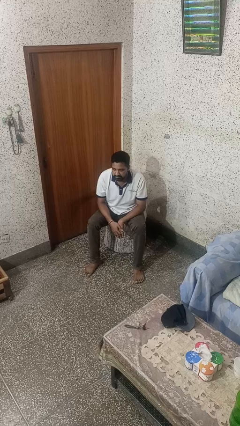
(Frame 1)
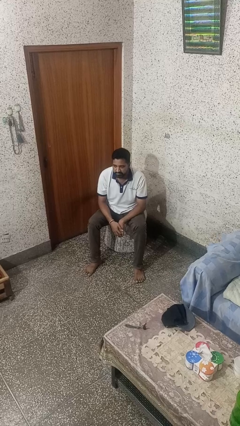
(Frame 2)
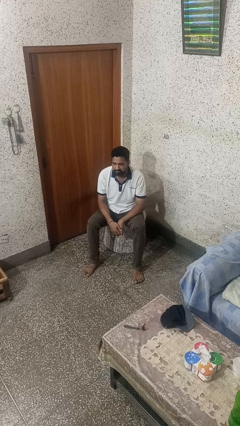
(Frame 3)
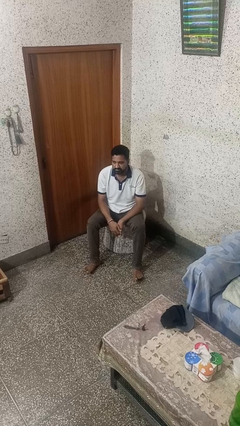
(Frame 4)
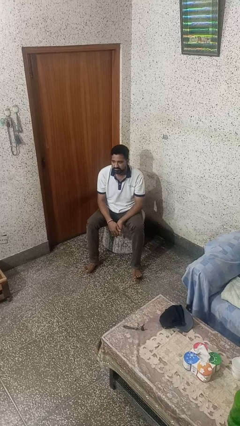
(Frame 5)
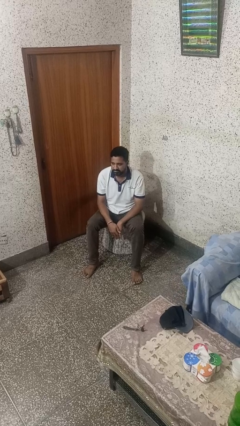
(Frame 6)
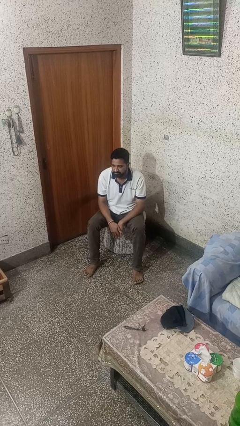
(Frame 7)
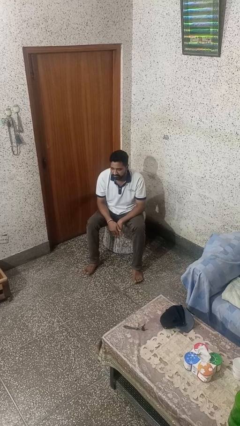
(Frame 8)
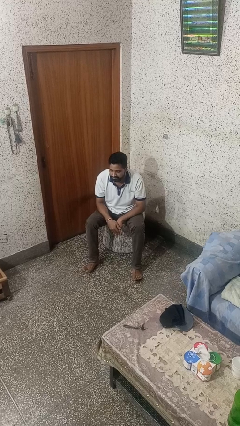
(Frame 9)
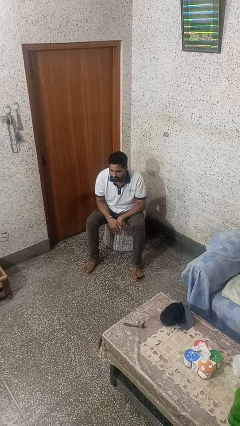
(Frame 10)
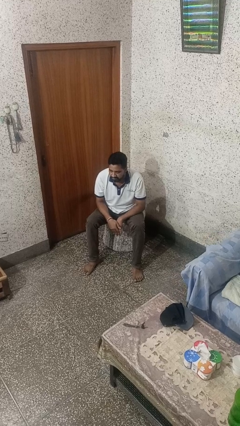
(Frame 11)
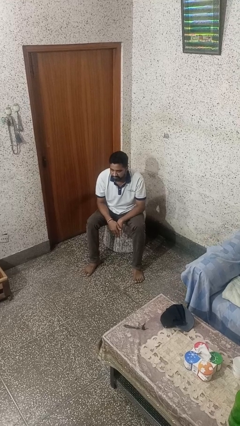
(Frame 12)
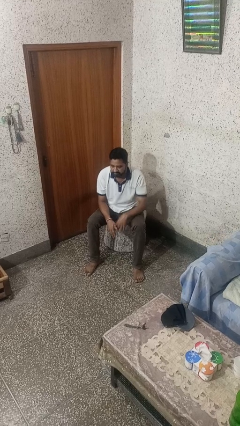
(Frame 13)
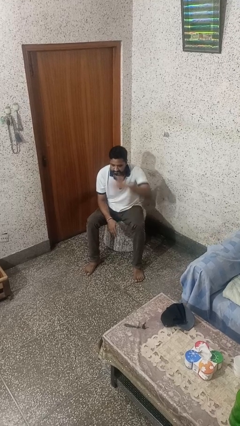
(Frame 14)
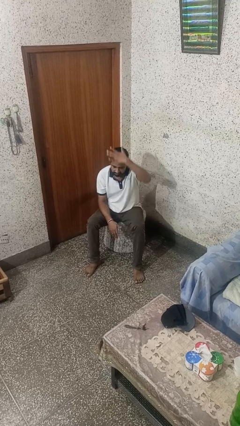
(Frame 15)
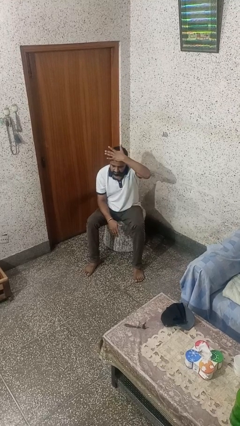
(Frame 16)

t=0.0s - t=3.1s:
person gestures cut

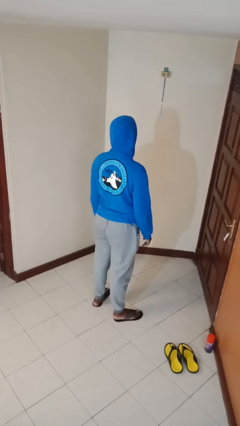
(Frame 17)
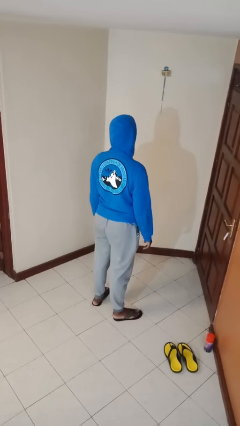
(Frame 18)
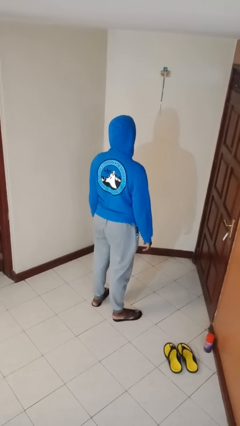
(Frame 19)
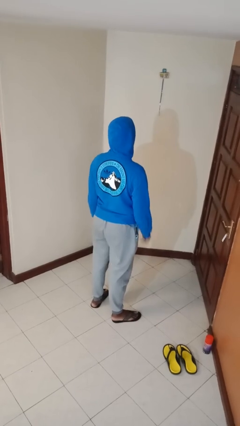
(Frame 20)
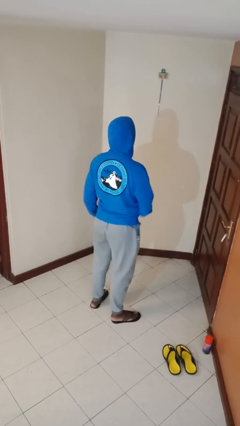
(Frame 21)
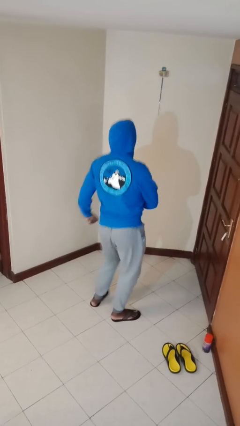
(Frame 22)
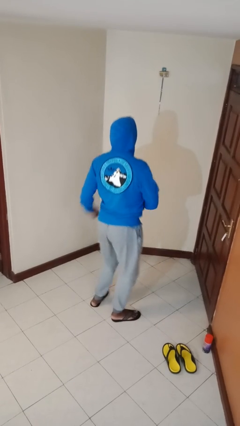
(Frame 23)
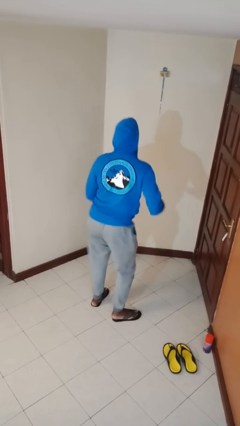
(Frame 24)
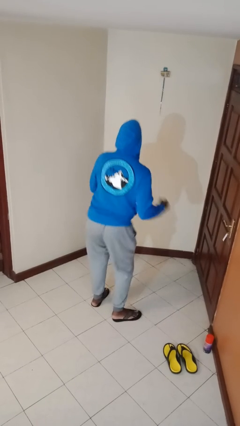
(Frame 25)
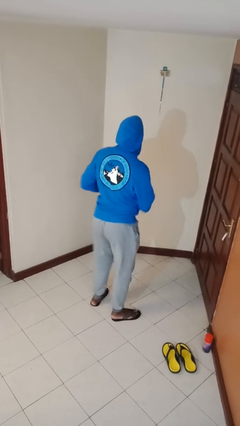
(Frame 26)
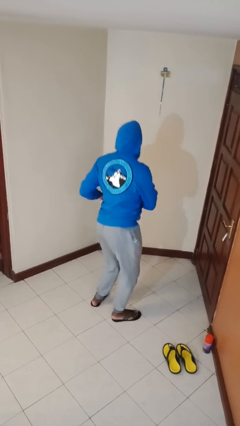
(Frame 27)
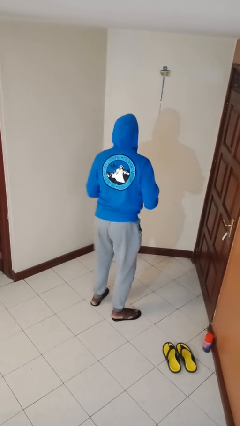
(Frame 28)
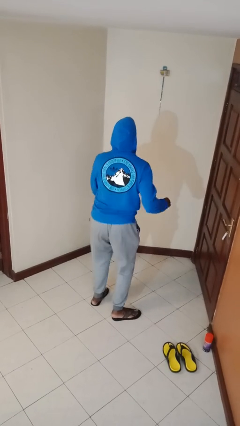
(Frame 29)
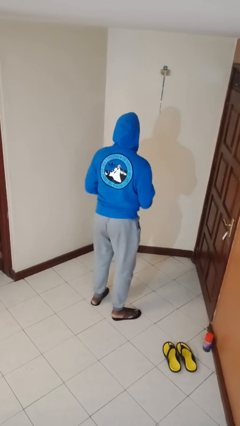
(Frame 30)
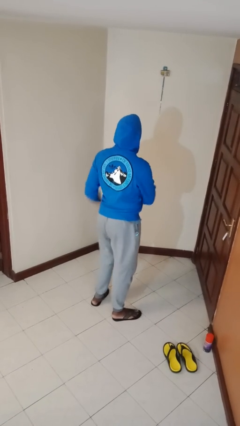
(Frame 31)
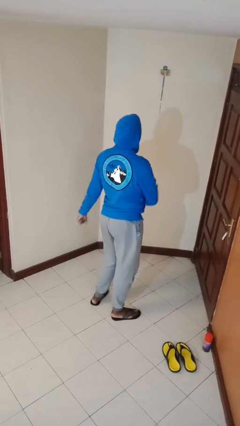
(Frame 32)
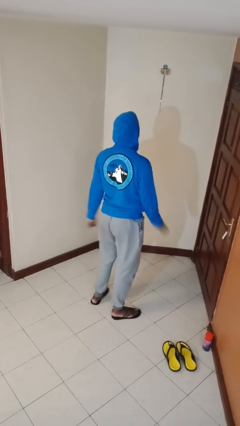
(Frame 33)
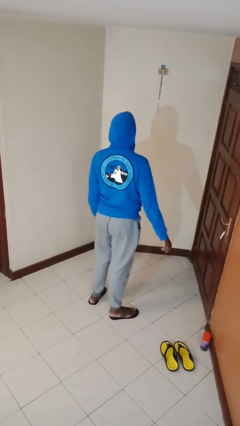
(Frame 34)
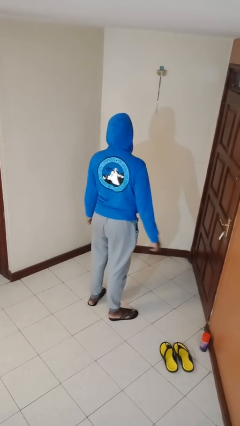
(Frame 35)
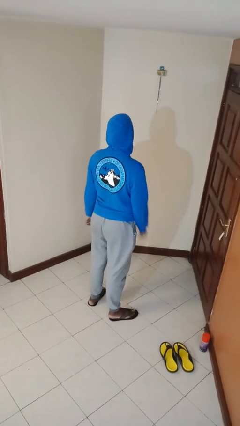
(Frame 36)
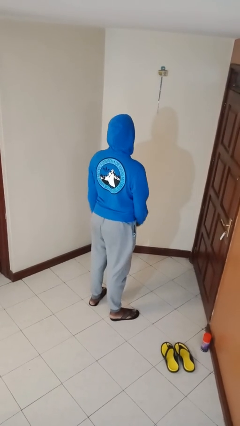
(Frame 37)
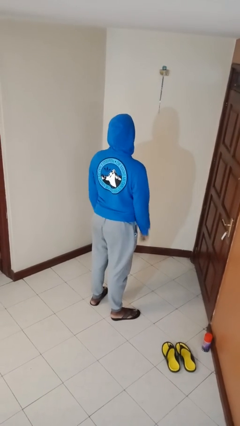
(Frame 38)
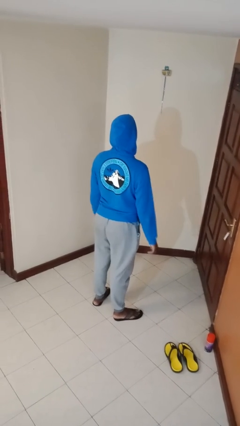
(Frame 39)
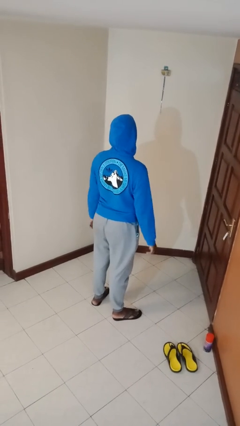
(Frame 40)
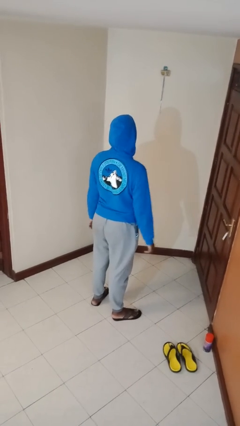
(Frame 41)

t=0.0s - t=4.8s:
person wiggles hips

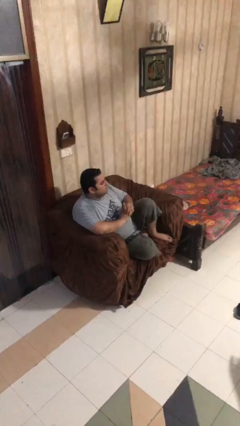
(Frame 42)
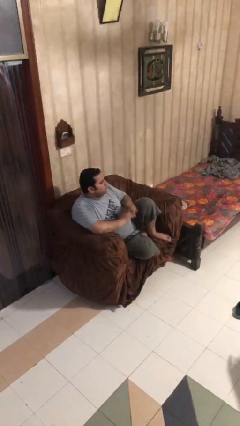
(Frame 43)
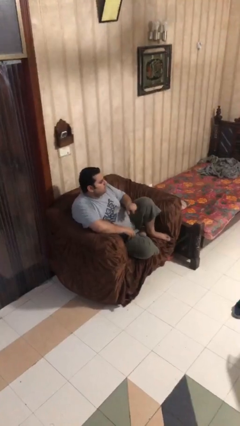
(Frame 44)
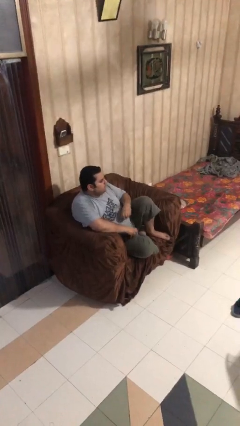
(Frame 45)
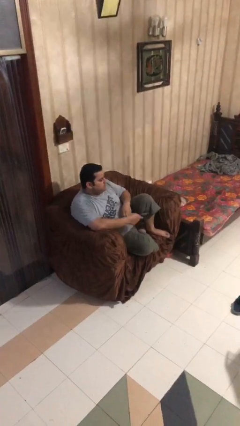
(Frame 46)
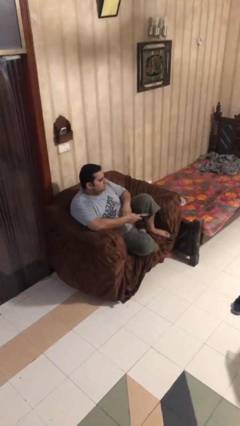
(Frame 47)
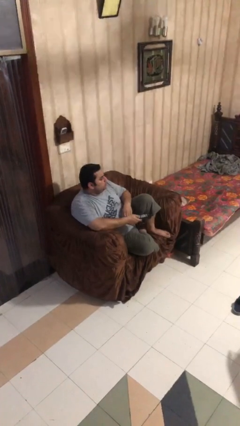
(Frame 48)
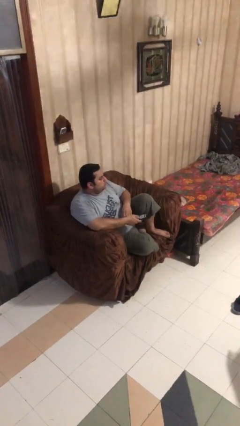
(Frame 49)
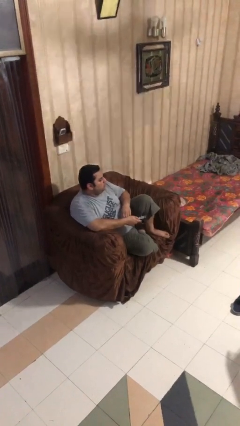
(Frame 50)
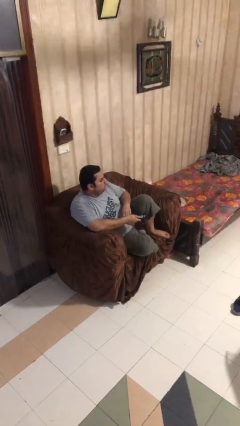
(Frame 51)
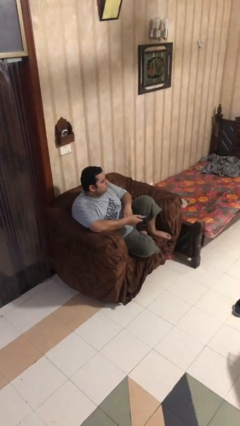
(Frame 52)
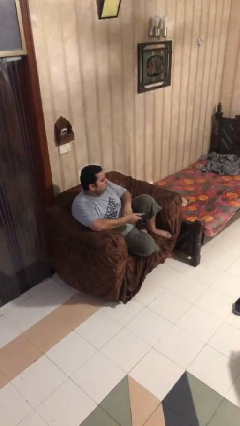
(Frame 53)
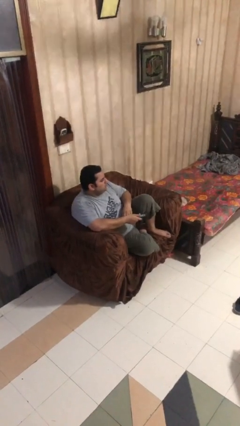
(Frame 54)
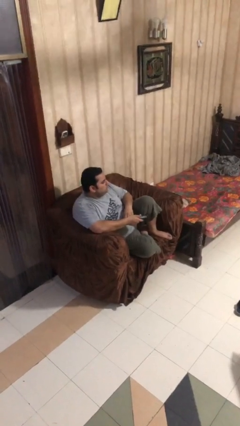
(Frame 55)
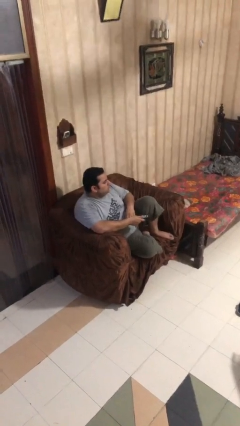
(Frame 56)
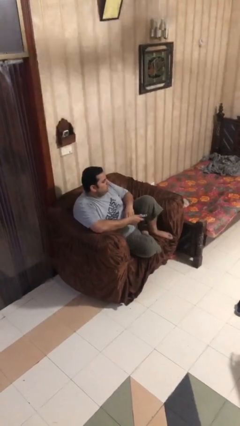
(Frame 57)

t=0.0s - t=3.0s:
person uses television remote

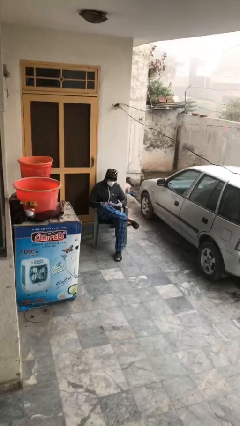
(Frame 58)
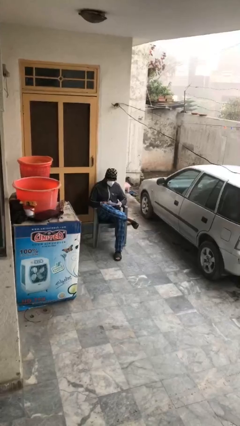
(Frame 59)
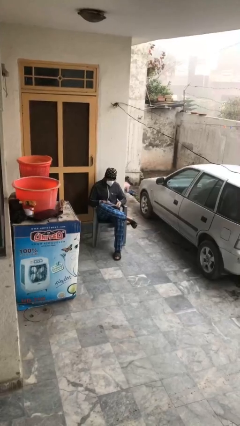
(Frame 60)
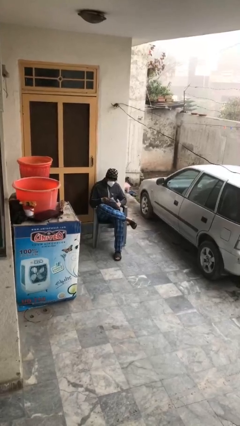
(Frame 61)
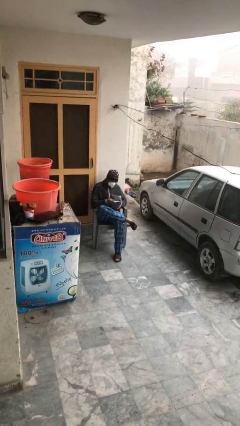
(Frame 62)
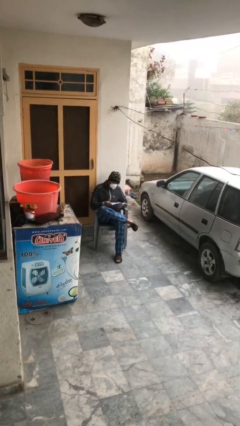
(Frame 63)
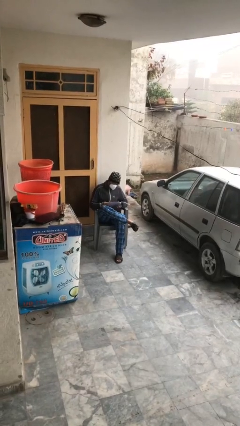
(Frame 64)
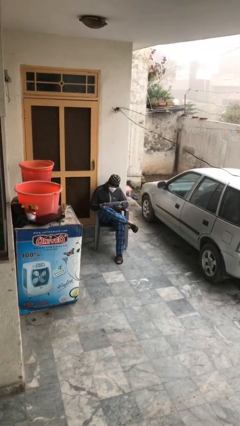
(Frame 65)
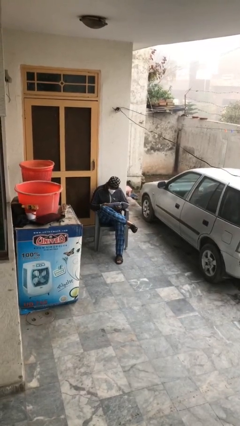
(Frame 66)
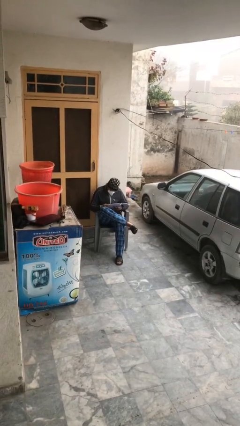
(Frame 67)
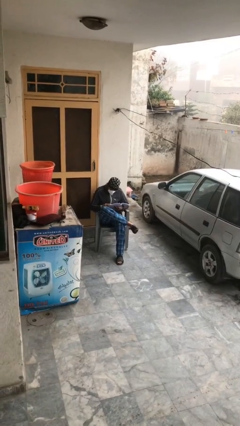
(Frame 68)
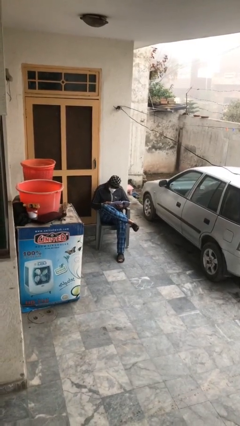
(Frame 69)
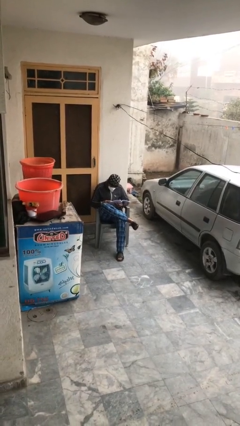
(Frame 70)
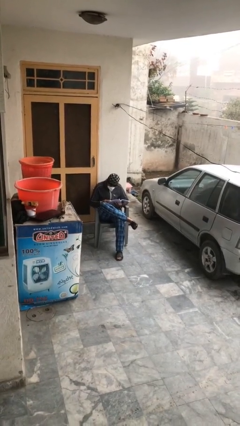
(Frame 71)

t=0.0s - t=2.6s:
person reads document

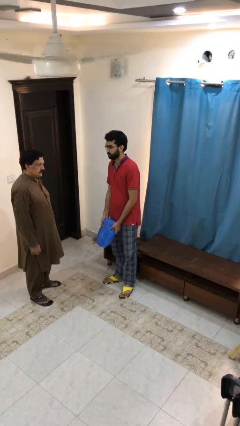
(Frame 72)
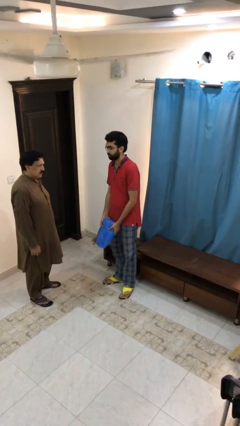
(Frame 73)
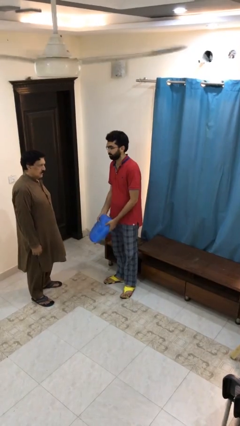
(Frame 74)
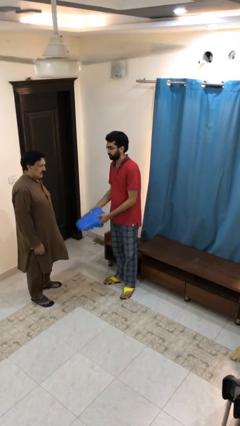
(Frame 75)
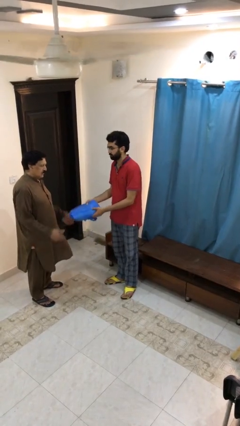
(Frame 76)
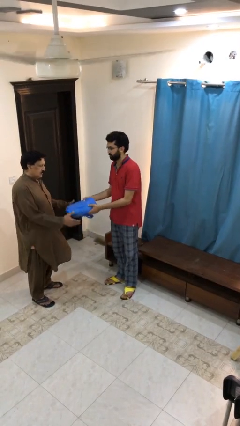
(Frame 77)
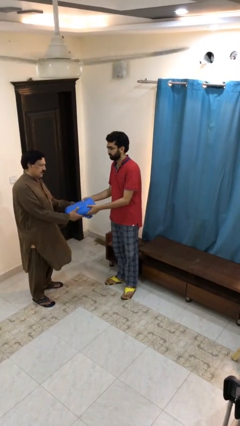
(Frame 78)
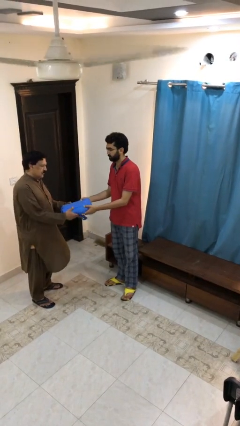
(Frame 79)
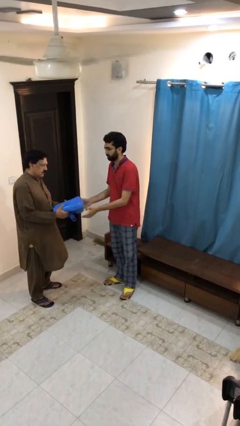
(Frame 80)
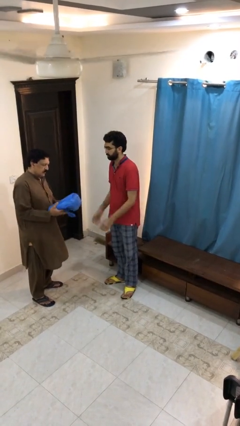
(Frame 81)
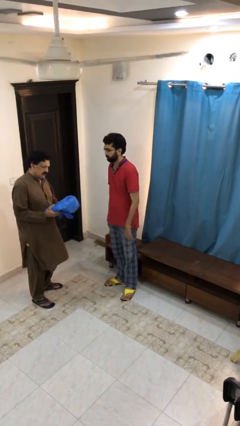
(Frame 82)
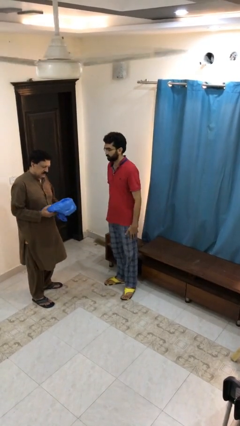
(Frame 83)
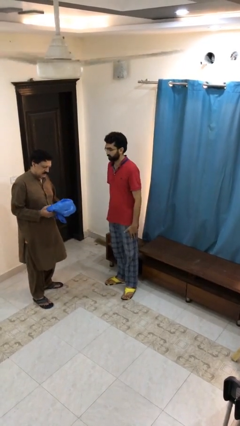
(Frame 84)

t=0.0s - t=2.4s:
person transfers object to person

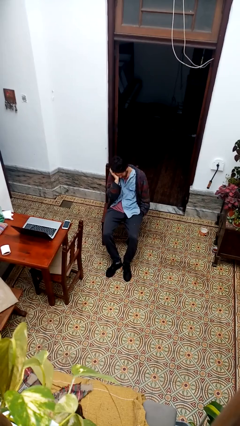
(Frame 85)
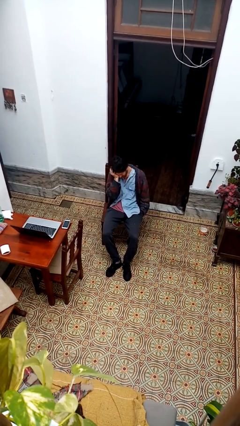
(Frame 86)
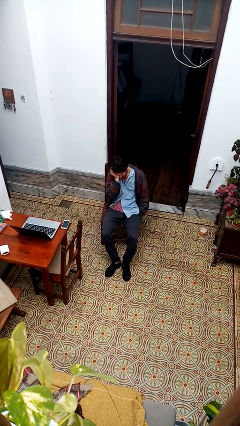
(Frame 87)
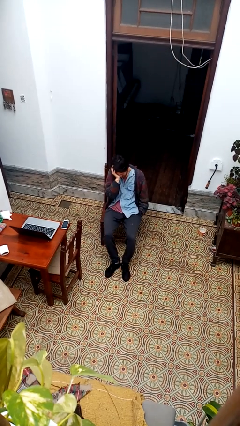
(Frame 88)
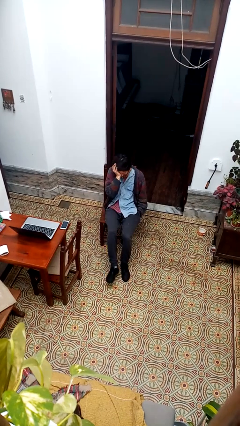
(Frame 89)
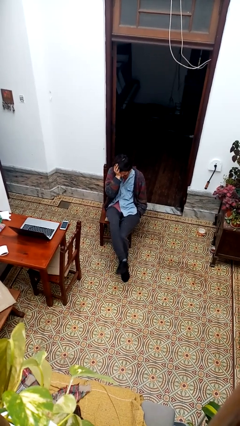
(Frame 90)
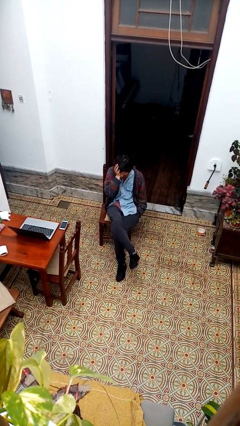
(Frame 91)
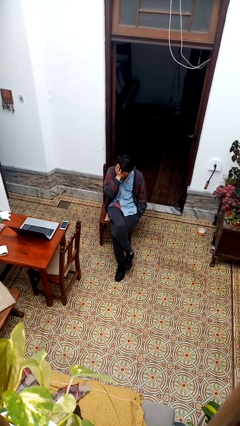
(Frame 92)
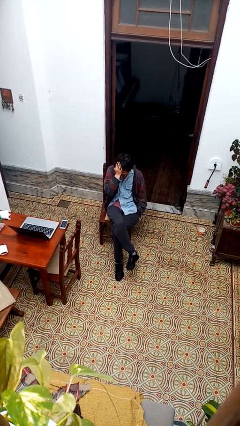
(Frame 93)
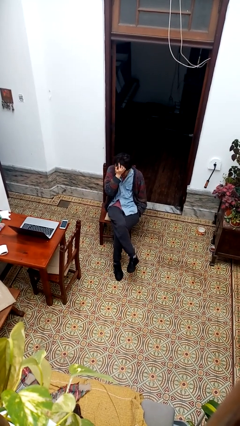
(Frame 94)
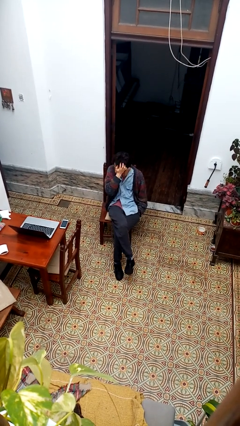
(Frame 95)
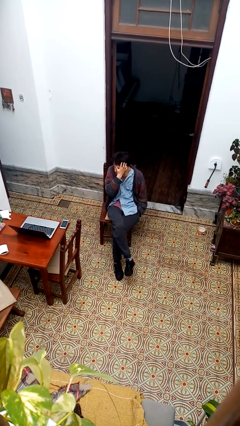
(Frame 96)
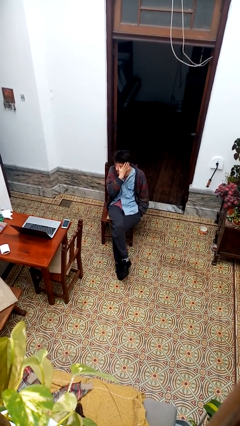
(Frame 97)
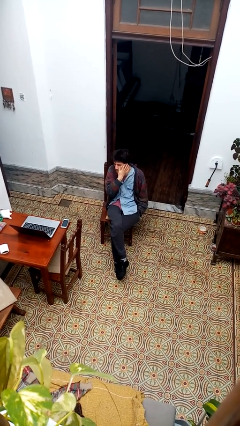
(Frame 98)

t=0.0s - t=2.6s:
person crosses legs
